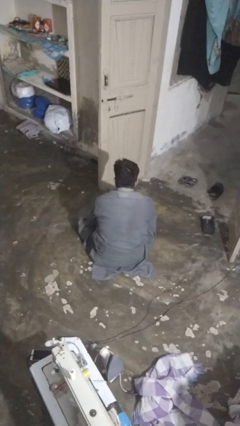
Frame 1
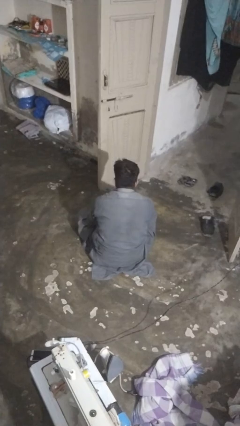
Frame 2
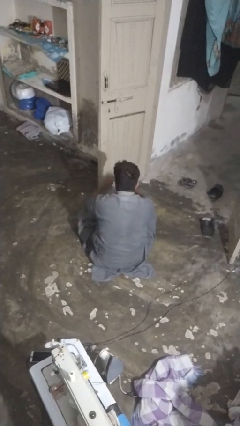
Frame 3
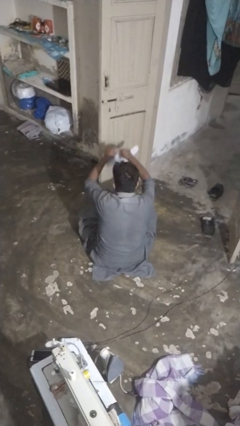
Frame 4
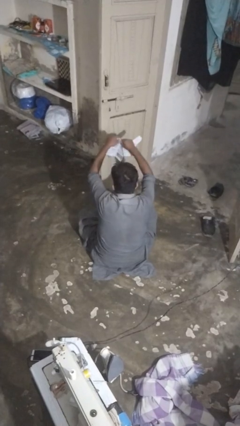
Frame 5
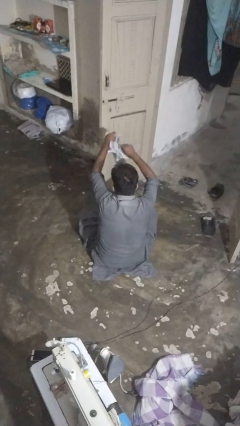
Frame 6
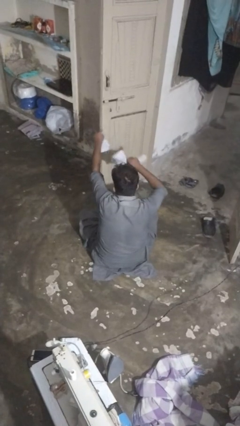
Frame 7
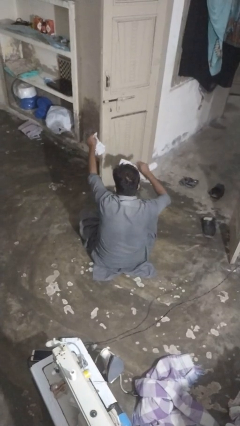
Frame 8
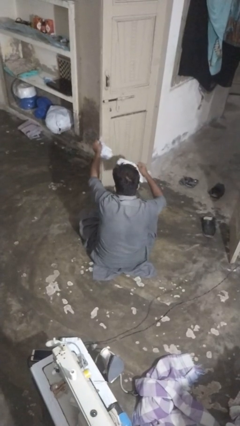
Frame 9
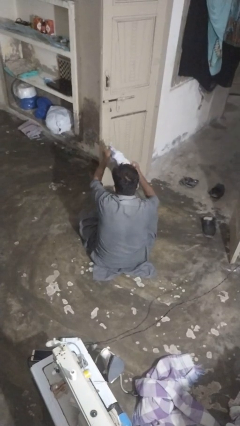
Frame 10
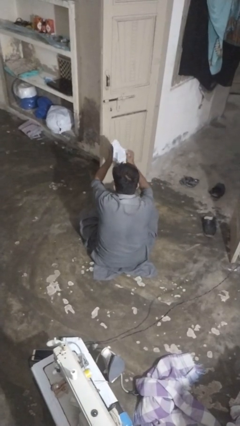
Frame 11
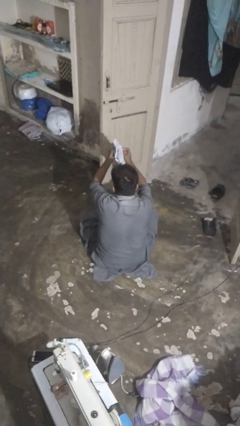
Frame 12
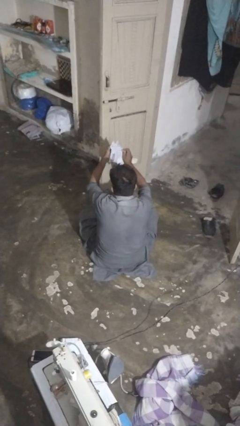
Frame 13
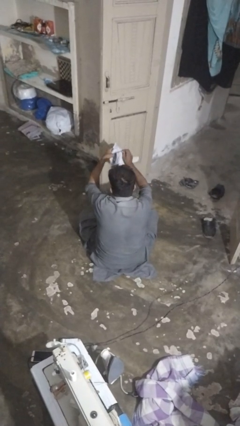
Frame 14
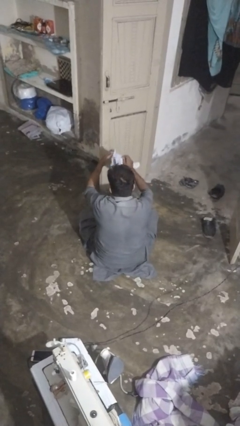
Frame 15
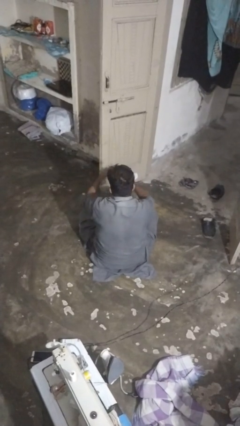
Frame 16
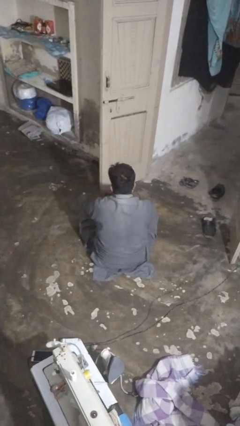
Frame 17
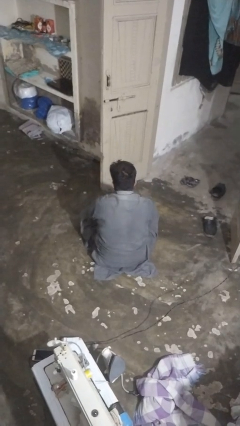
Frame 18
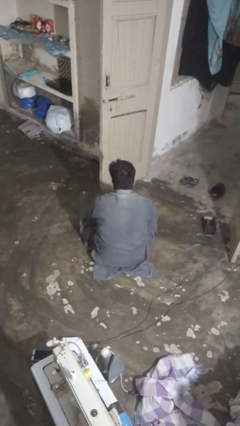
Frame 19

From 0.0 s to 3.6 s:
person tears paper

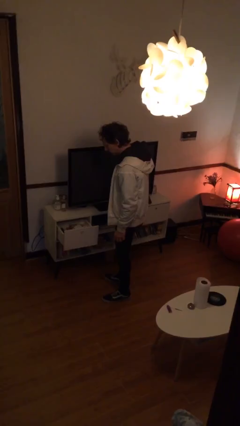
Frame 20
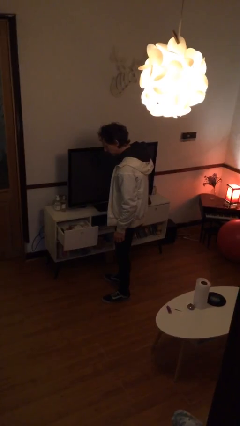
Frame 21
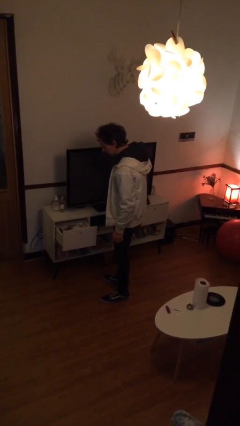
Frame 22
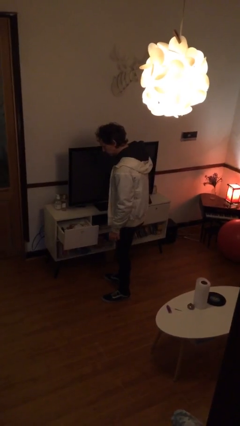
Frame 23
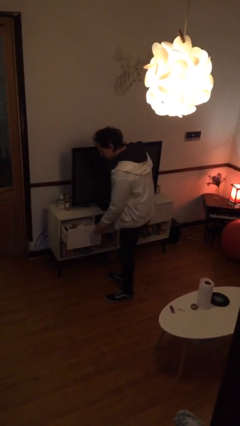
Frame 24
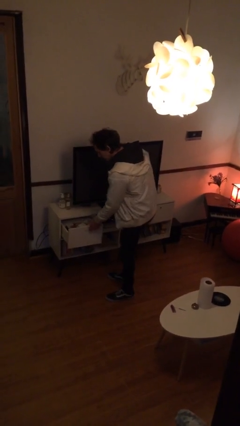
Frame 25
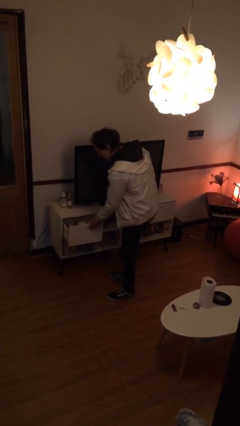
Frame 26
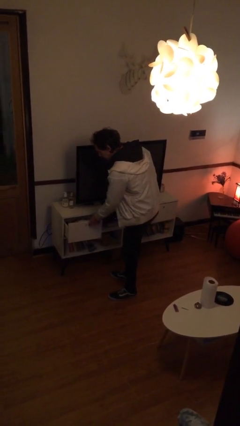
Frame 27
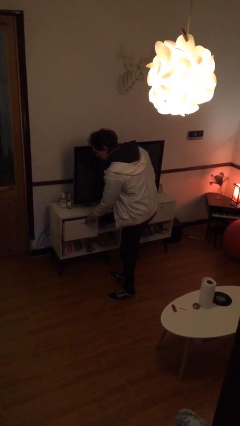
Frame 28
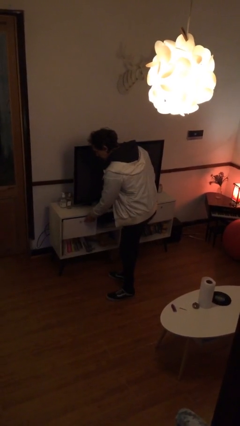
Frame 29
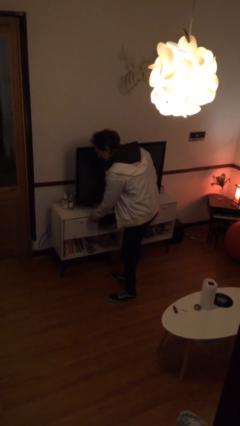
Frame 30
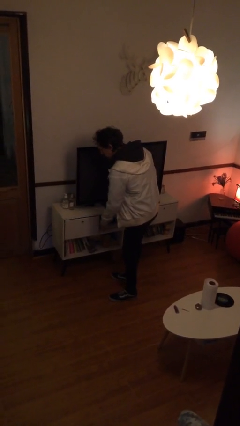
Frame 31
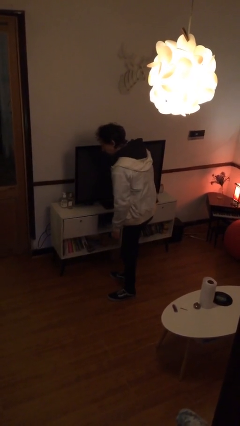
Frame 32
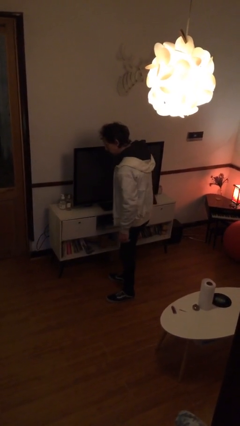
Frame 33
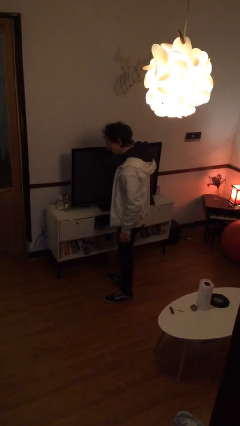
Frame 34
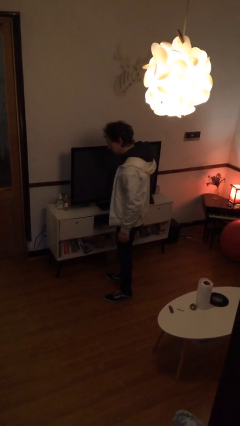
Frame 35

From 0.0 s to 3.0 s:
person closes dresser drawer

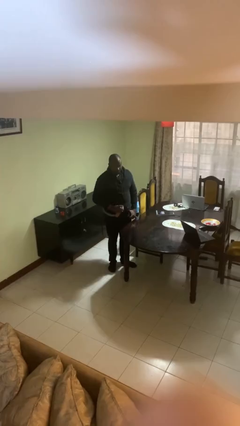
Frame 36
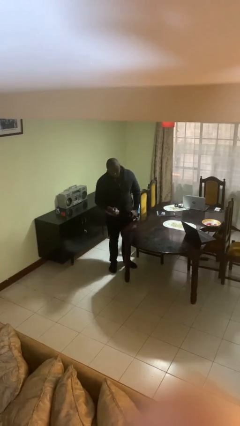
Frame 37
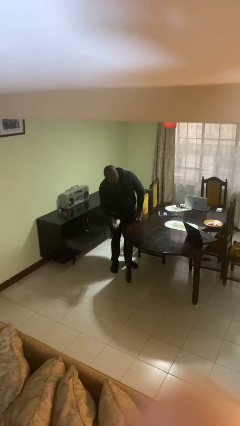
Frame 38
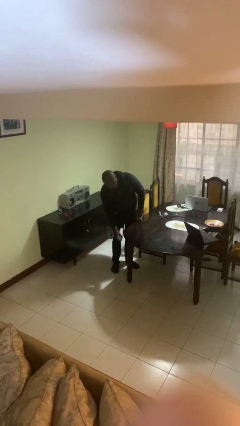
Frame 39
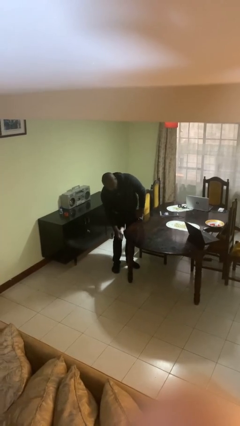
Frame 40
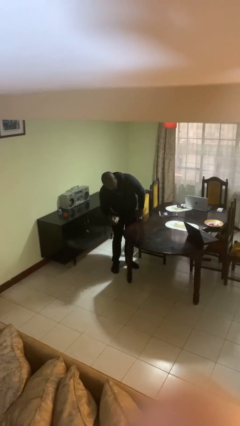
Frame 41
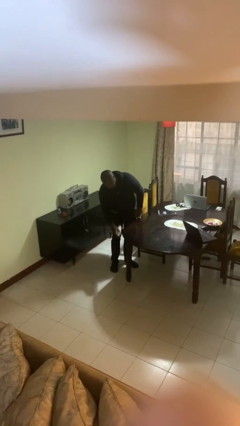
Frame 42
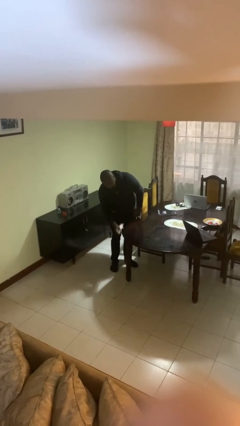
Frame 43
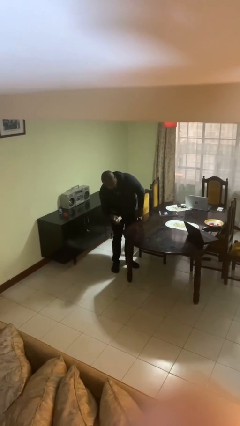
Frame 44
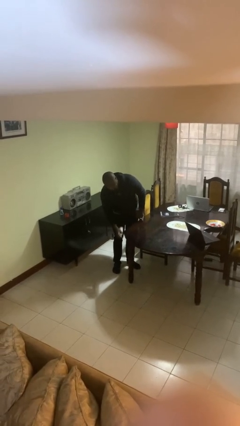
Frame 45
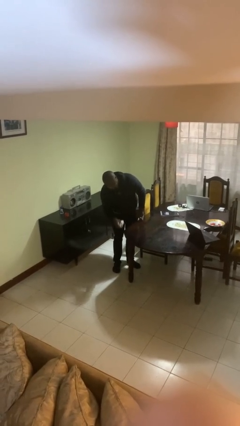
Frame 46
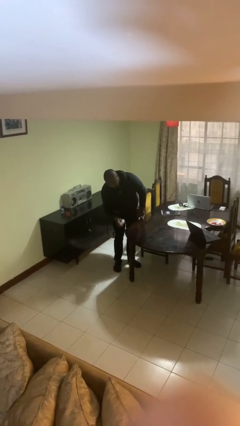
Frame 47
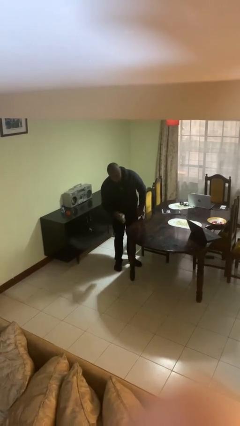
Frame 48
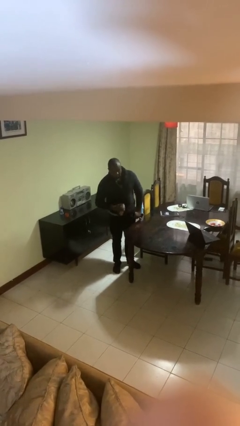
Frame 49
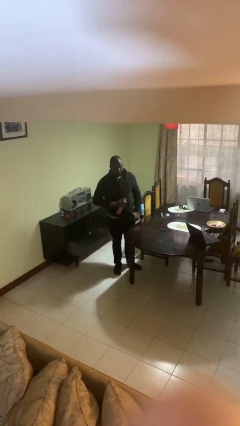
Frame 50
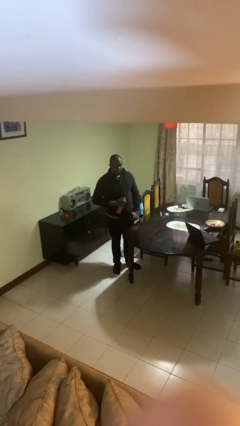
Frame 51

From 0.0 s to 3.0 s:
person sprays from bottle

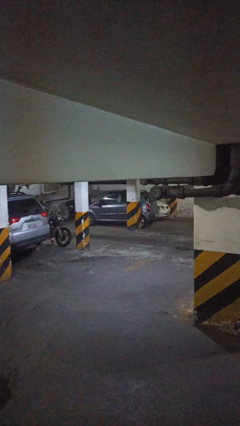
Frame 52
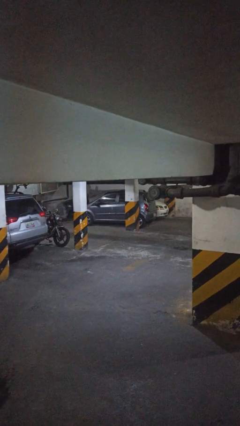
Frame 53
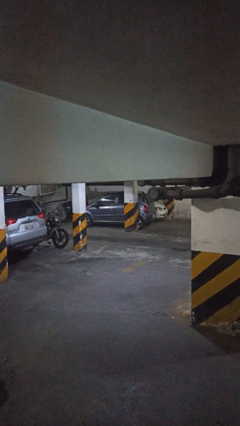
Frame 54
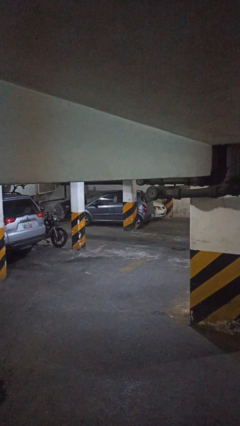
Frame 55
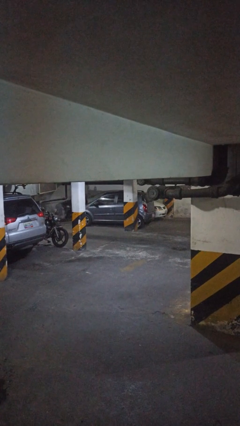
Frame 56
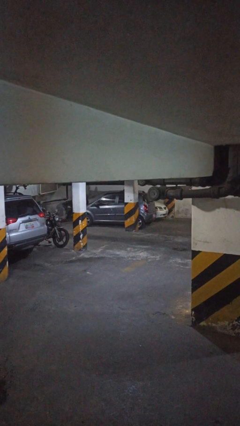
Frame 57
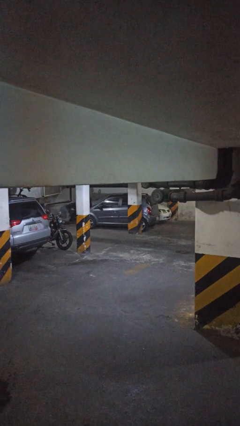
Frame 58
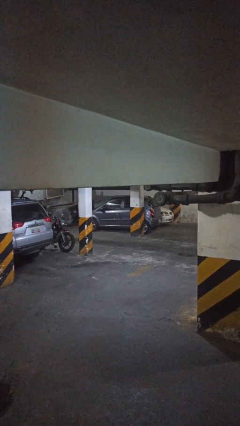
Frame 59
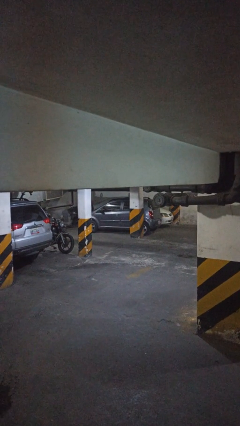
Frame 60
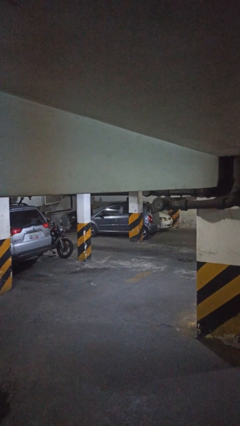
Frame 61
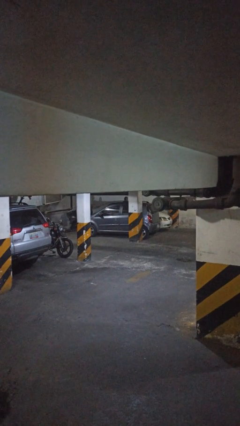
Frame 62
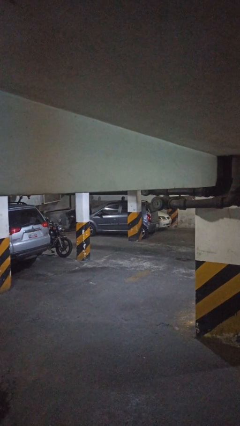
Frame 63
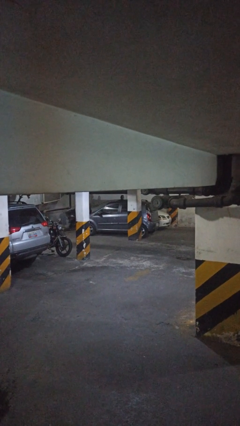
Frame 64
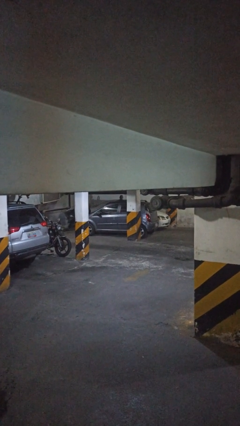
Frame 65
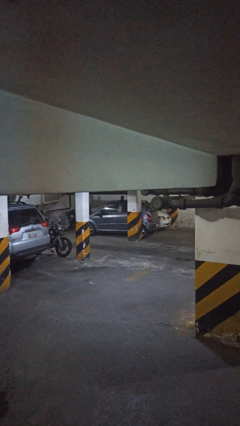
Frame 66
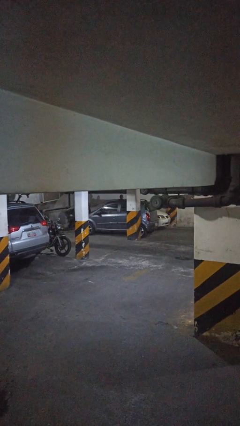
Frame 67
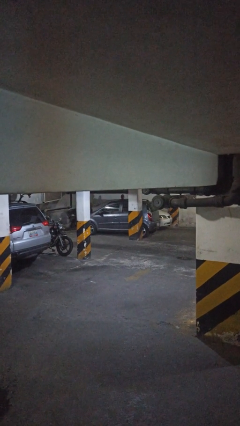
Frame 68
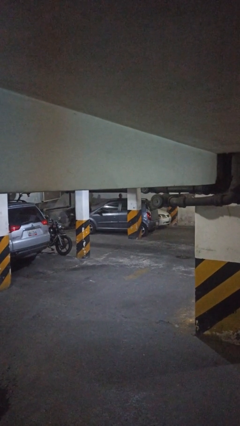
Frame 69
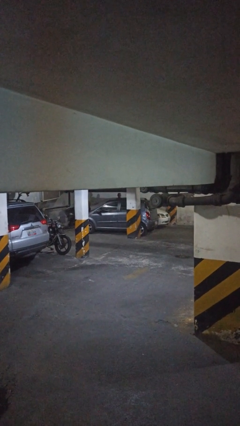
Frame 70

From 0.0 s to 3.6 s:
car drops off person

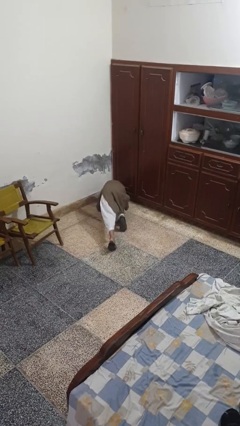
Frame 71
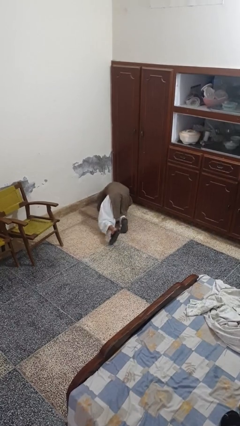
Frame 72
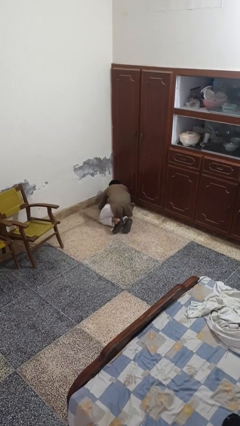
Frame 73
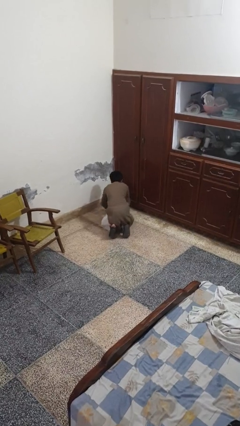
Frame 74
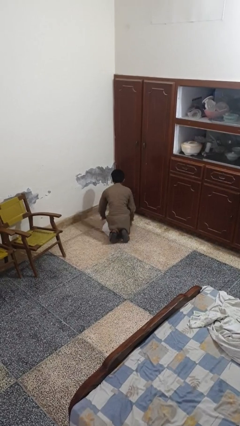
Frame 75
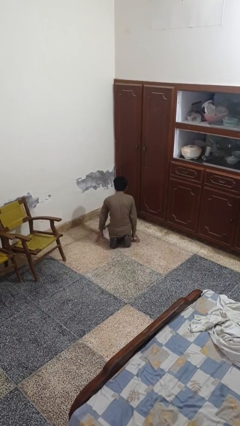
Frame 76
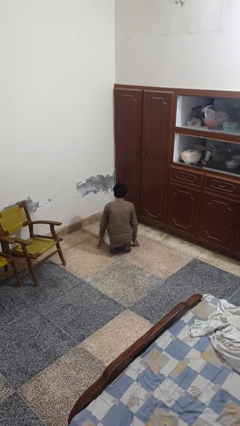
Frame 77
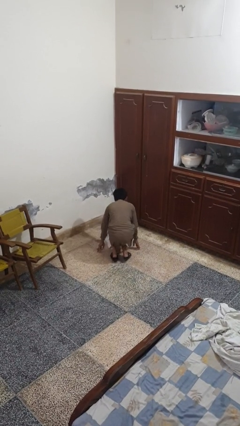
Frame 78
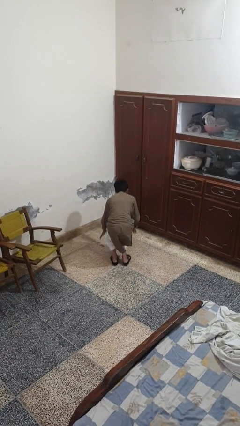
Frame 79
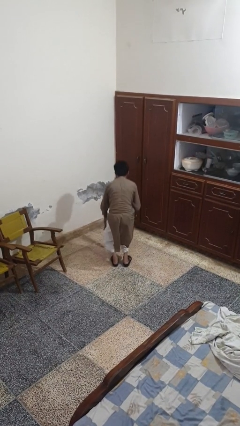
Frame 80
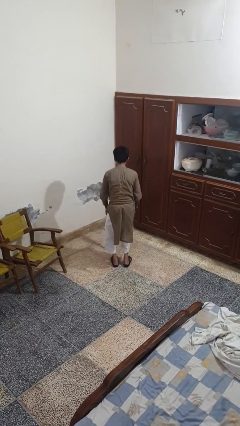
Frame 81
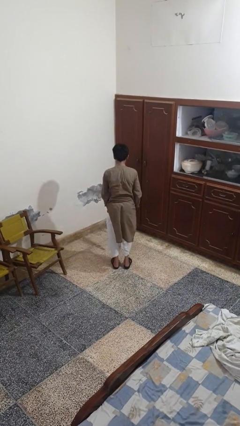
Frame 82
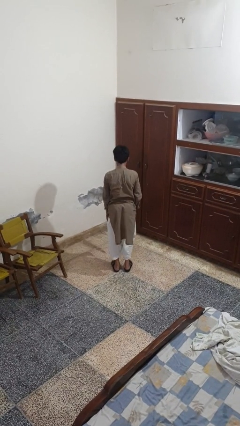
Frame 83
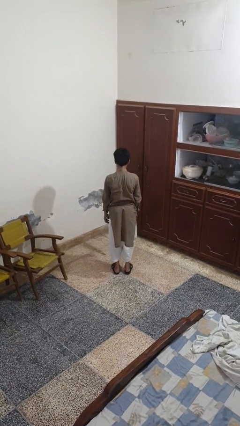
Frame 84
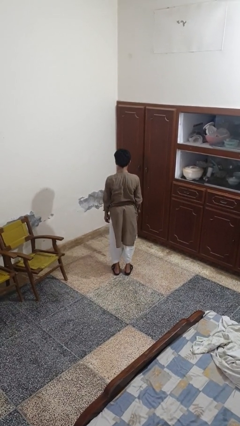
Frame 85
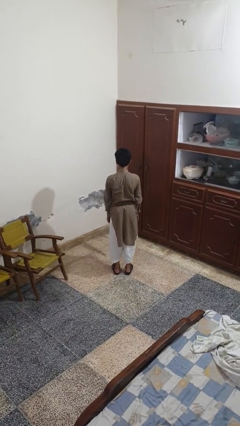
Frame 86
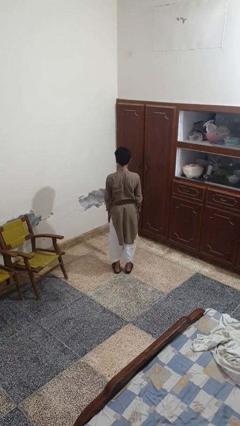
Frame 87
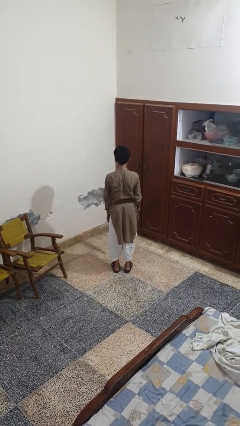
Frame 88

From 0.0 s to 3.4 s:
person stands up from floor

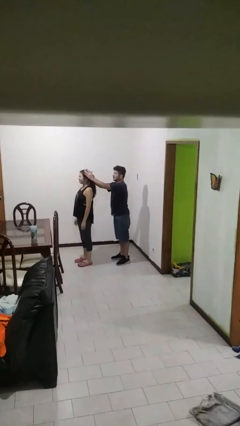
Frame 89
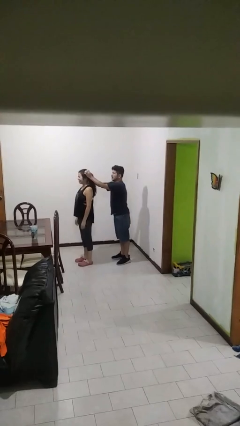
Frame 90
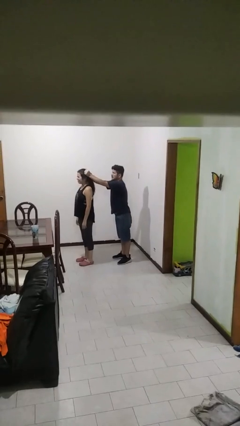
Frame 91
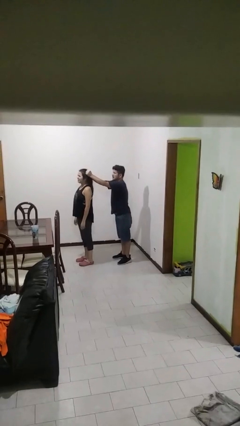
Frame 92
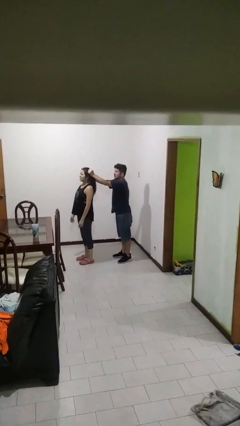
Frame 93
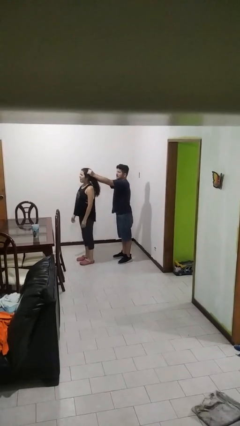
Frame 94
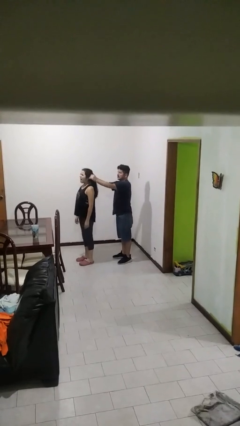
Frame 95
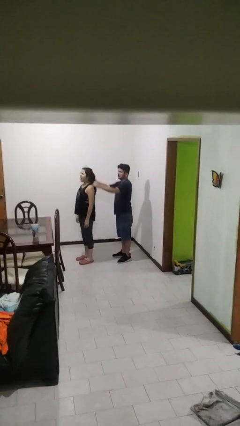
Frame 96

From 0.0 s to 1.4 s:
person grabs person by hair
